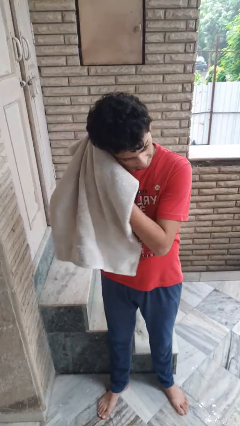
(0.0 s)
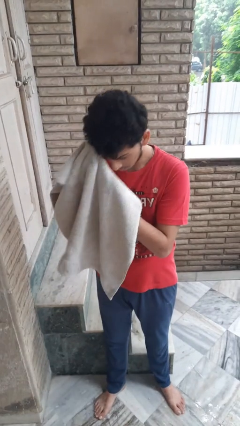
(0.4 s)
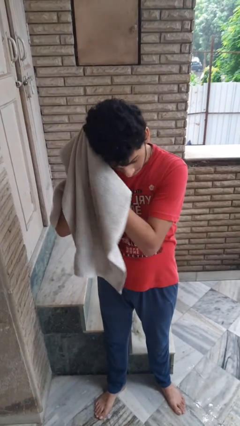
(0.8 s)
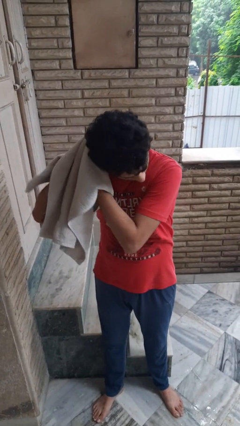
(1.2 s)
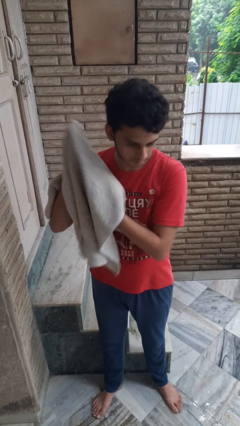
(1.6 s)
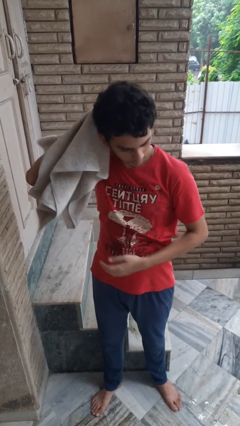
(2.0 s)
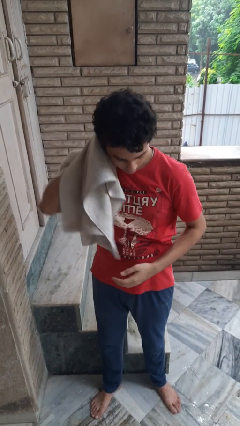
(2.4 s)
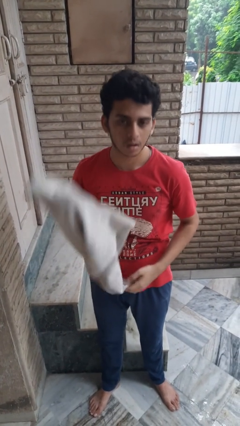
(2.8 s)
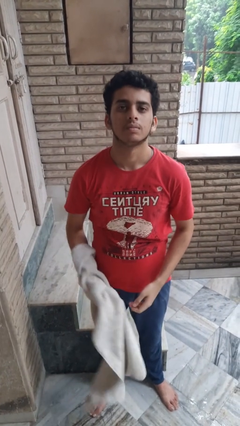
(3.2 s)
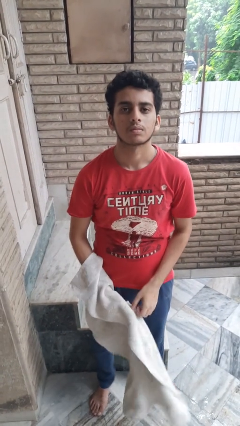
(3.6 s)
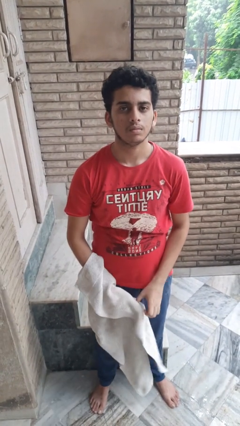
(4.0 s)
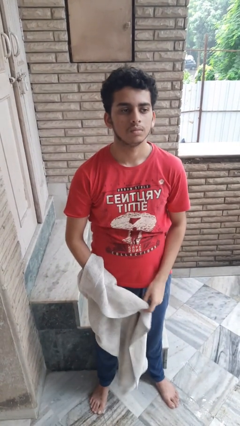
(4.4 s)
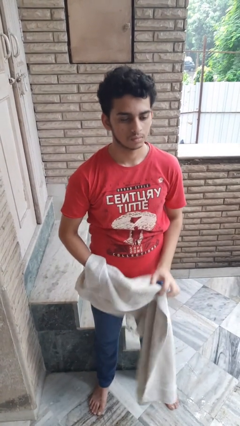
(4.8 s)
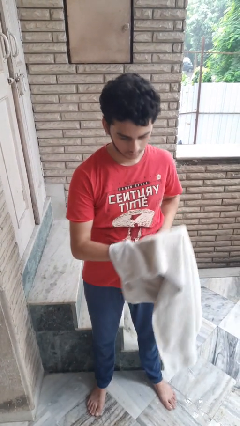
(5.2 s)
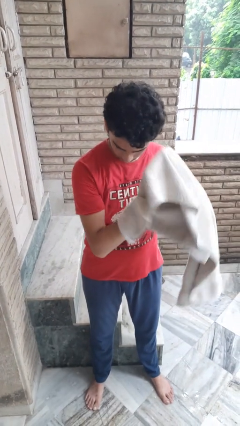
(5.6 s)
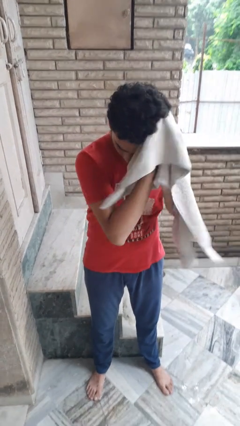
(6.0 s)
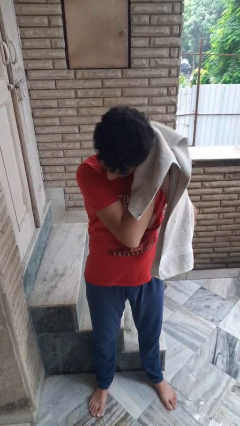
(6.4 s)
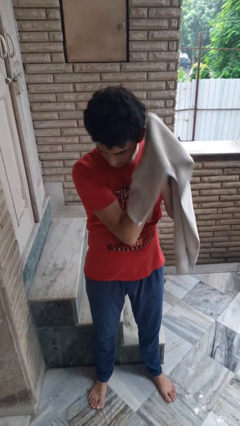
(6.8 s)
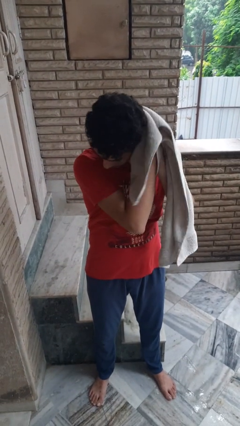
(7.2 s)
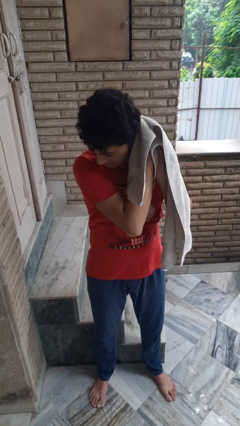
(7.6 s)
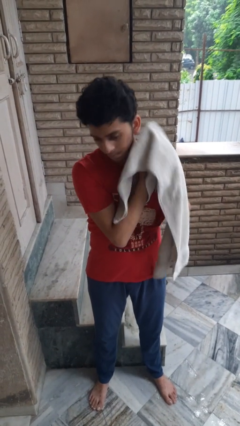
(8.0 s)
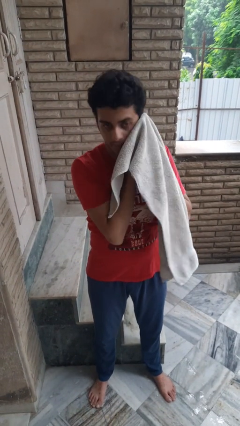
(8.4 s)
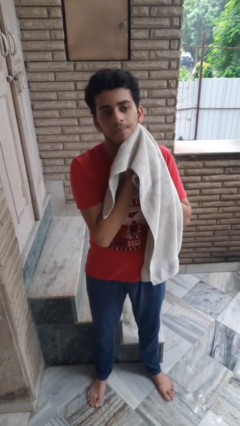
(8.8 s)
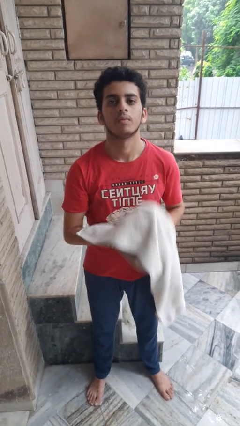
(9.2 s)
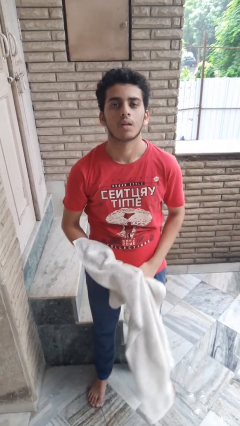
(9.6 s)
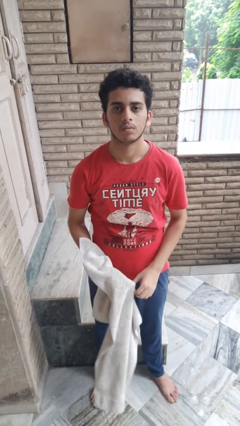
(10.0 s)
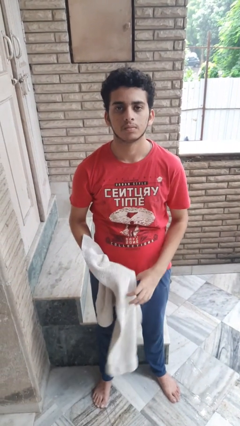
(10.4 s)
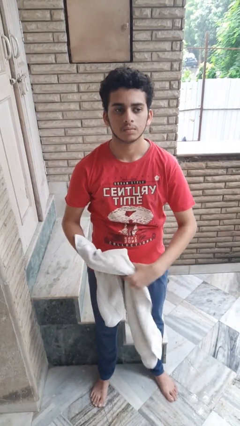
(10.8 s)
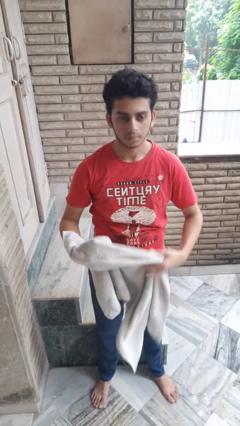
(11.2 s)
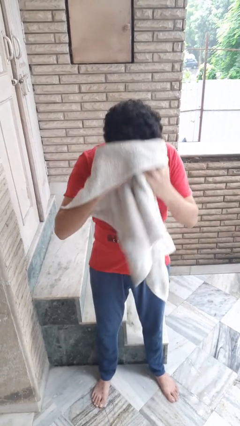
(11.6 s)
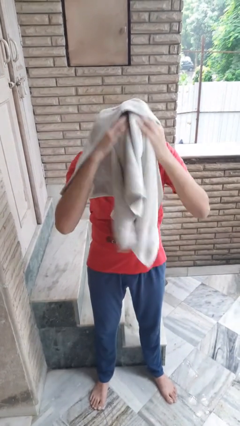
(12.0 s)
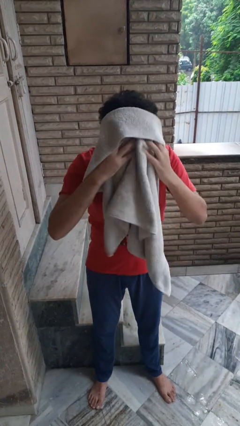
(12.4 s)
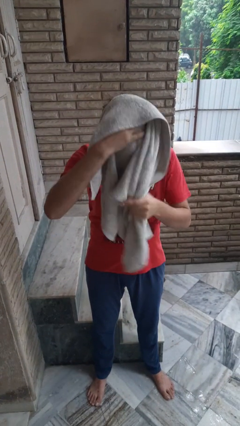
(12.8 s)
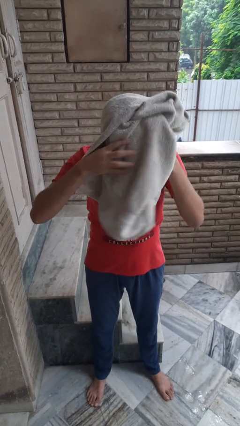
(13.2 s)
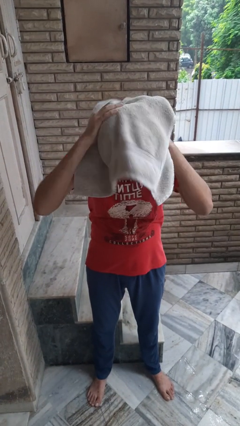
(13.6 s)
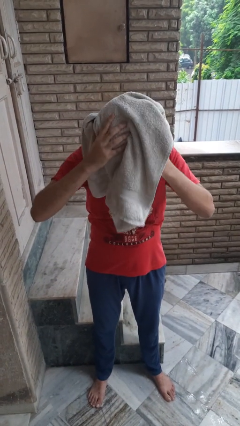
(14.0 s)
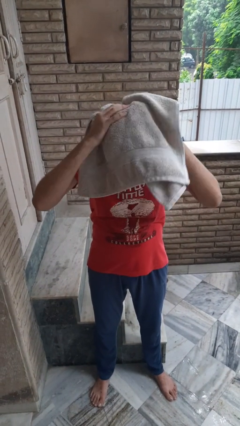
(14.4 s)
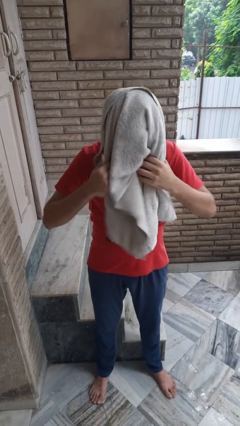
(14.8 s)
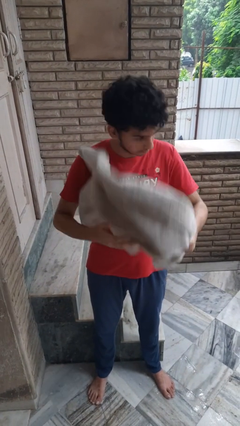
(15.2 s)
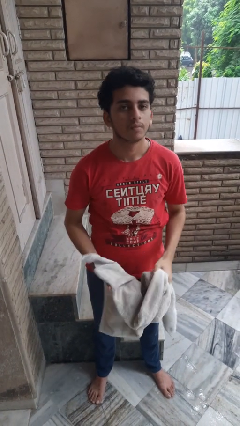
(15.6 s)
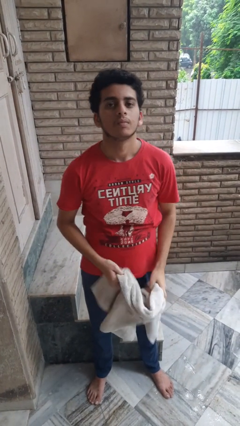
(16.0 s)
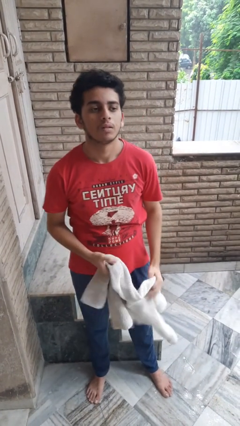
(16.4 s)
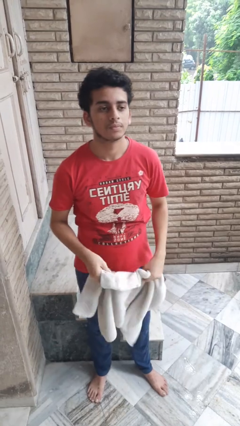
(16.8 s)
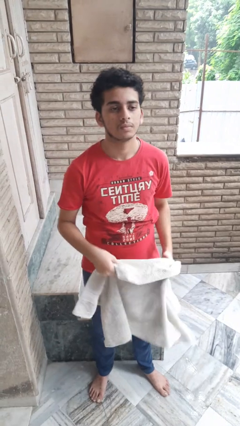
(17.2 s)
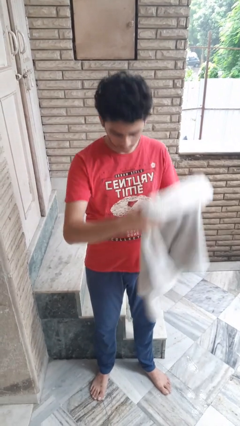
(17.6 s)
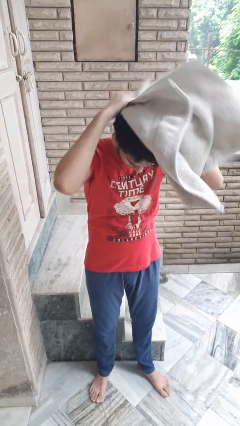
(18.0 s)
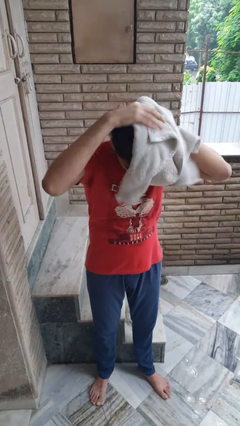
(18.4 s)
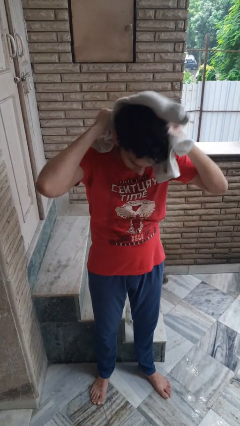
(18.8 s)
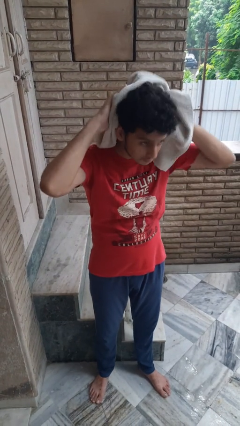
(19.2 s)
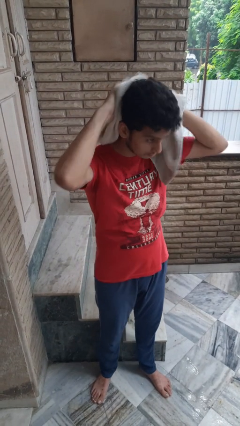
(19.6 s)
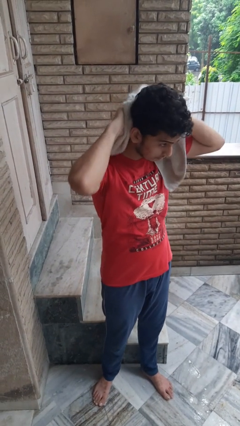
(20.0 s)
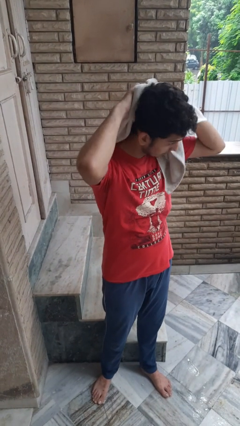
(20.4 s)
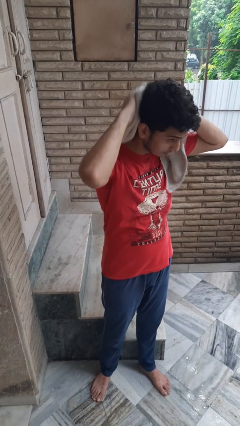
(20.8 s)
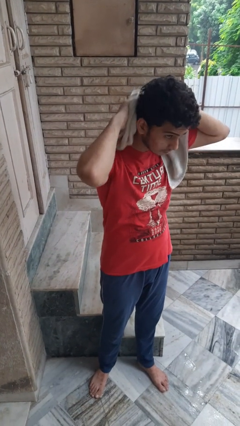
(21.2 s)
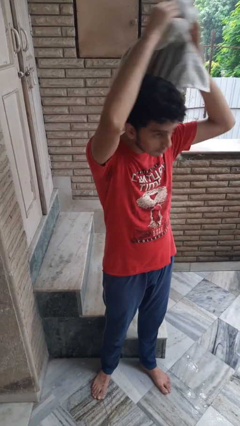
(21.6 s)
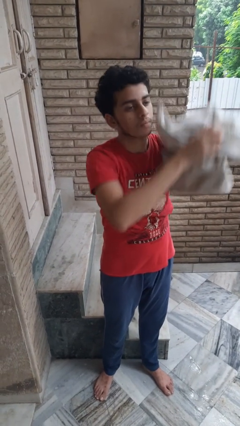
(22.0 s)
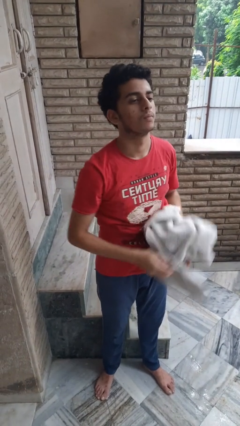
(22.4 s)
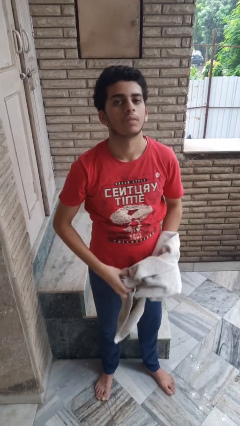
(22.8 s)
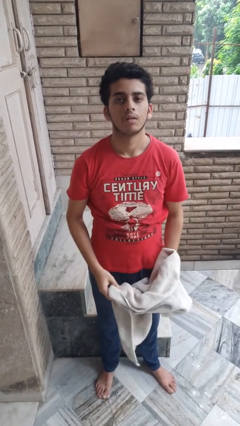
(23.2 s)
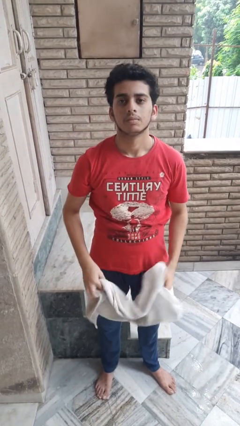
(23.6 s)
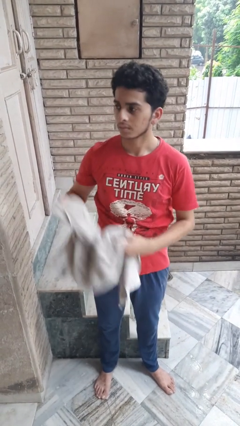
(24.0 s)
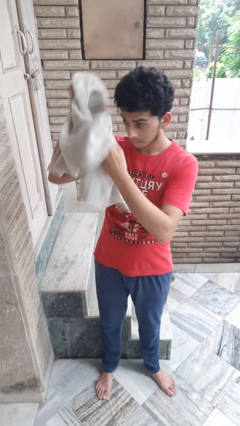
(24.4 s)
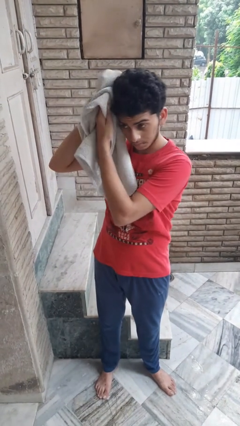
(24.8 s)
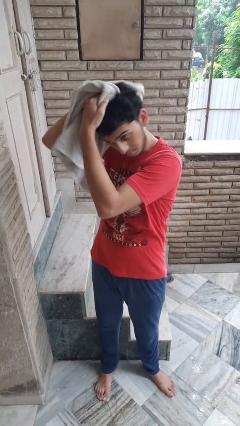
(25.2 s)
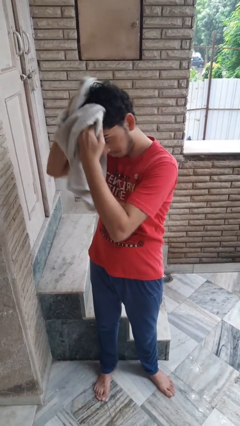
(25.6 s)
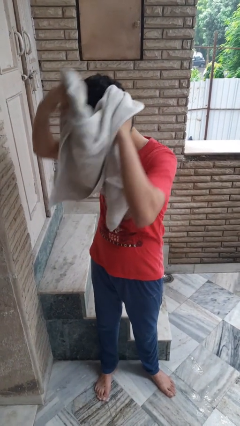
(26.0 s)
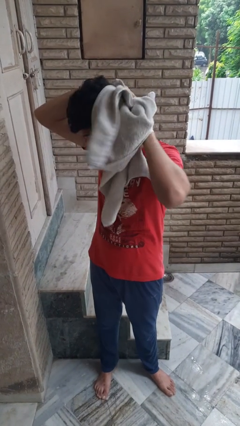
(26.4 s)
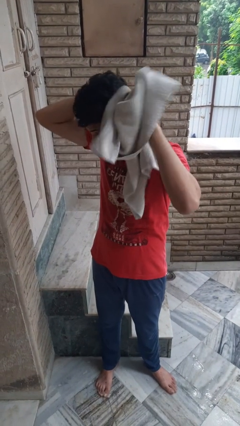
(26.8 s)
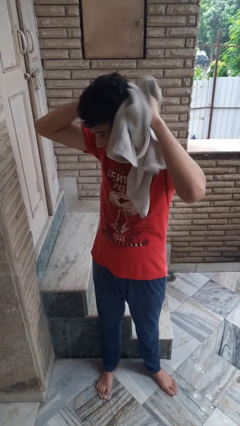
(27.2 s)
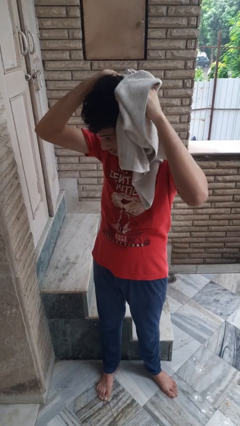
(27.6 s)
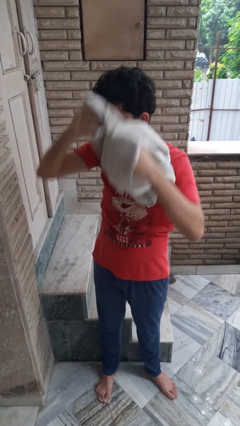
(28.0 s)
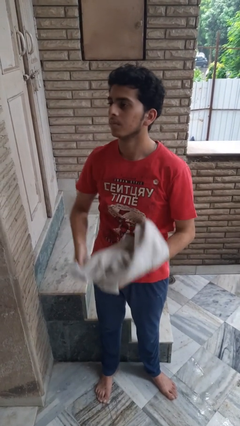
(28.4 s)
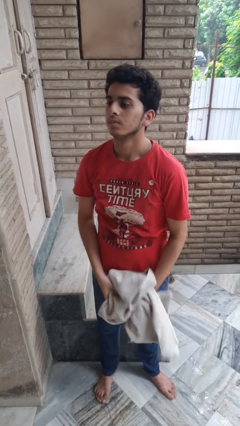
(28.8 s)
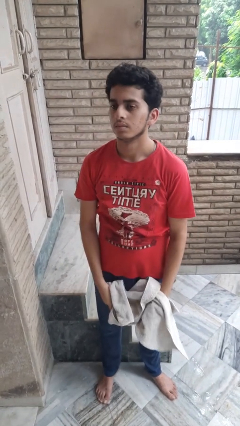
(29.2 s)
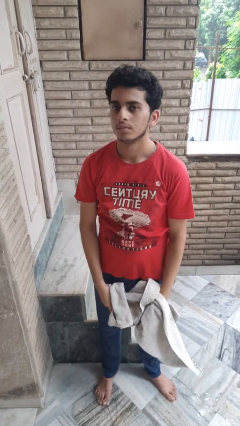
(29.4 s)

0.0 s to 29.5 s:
person dries hair with towel

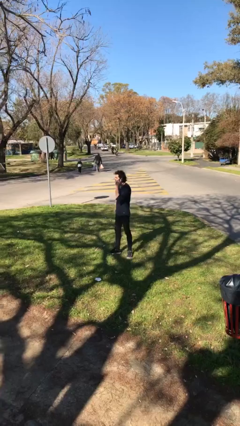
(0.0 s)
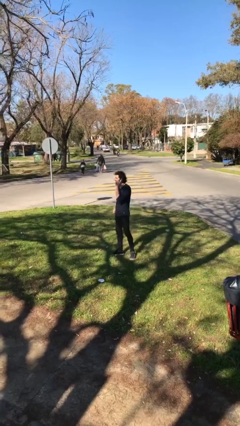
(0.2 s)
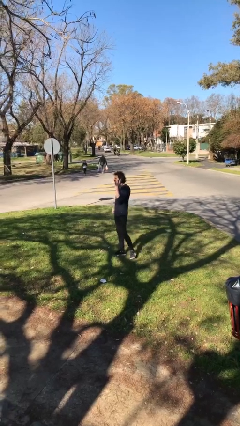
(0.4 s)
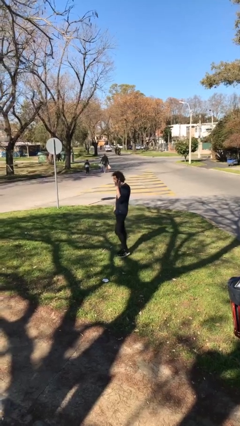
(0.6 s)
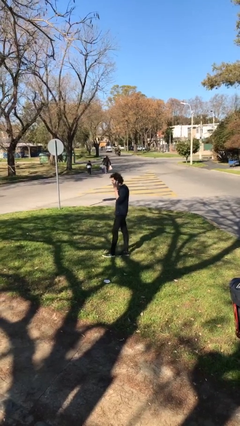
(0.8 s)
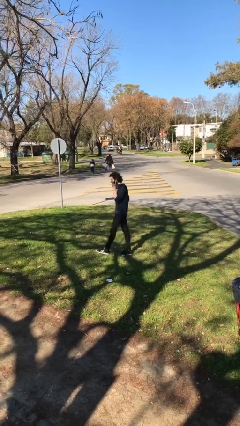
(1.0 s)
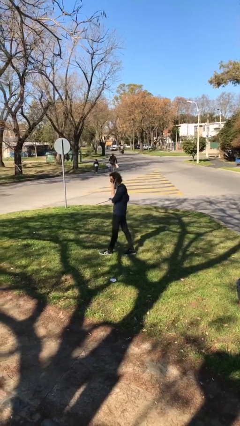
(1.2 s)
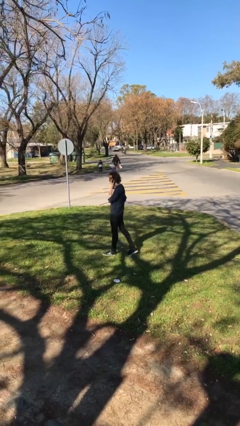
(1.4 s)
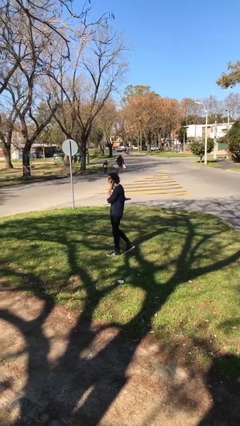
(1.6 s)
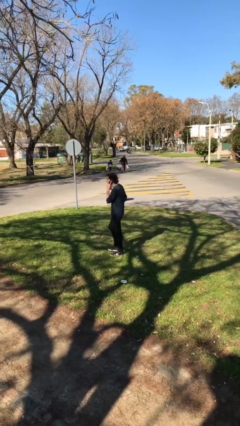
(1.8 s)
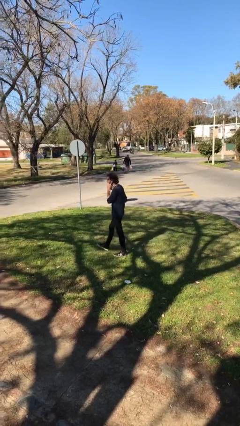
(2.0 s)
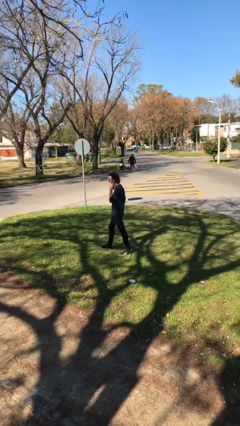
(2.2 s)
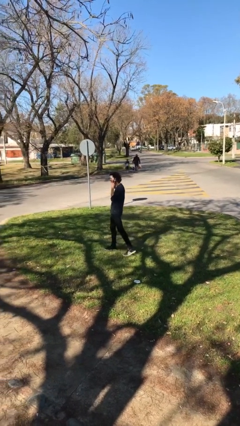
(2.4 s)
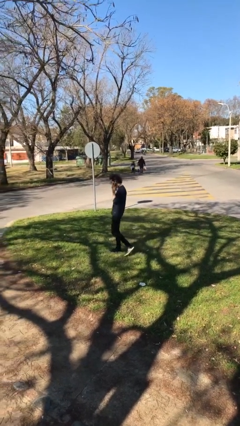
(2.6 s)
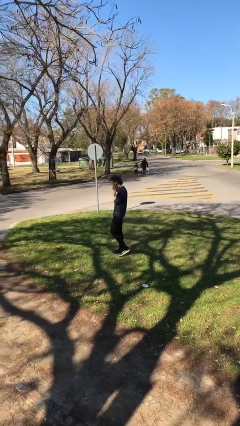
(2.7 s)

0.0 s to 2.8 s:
person talks on phone

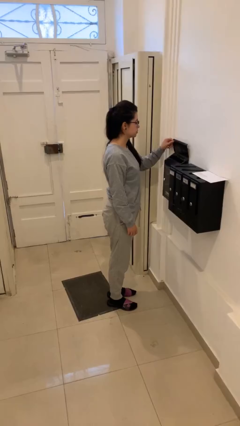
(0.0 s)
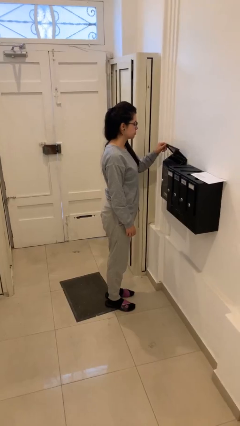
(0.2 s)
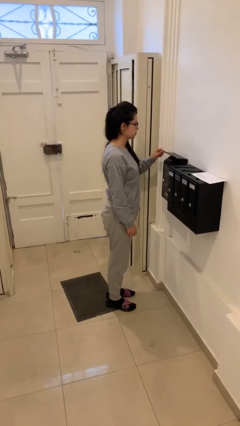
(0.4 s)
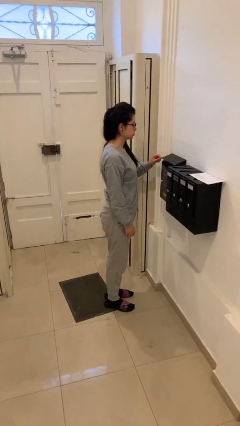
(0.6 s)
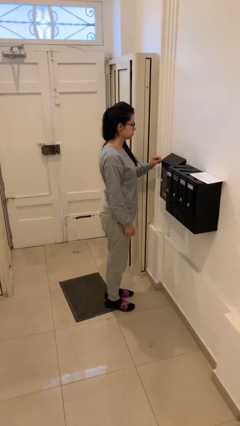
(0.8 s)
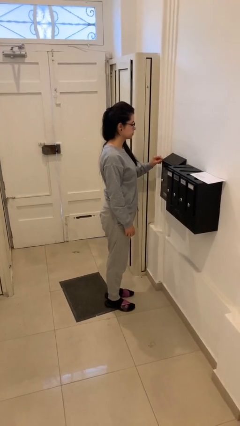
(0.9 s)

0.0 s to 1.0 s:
person closes mailbox
